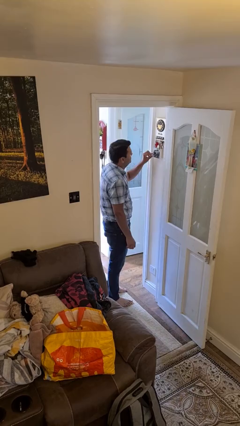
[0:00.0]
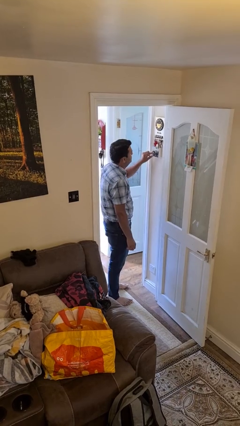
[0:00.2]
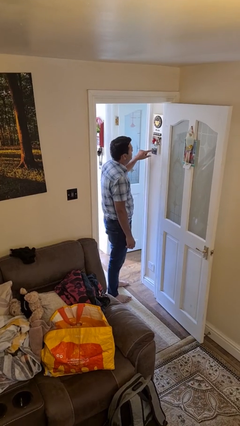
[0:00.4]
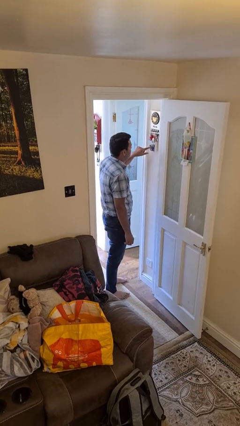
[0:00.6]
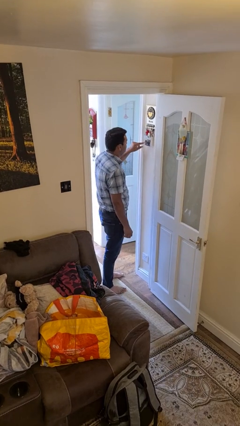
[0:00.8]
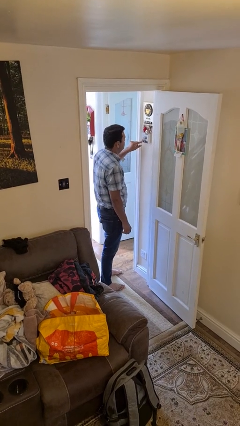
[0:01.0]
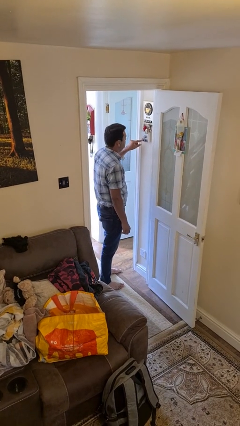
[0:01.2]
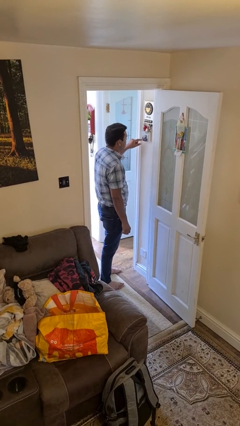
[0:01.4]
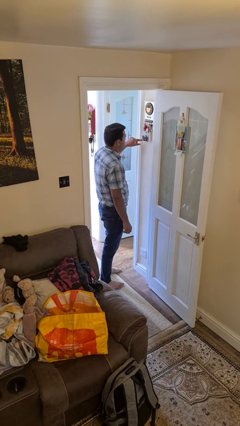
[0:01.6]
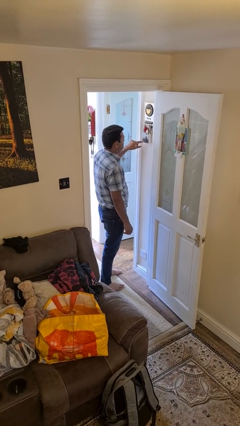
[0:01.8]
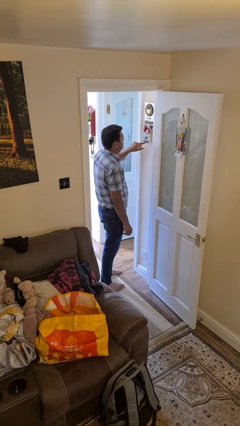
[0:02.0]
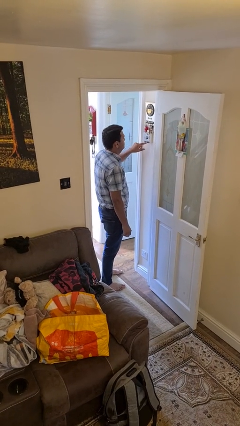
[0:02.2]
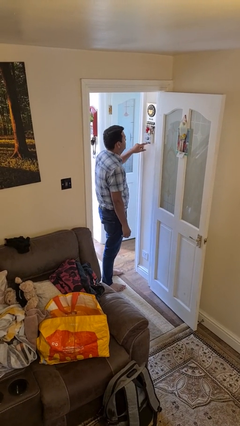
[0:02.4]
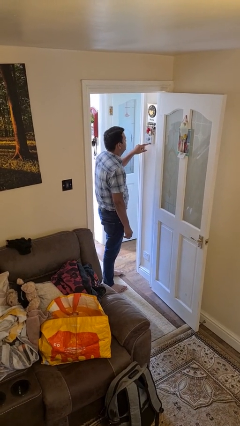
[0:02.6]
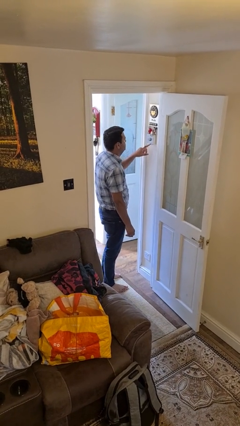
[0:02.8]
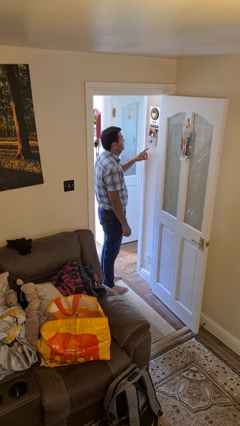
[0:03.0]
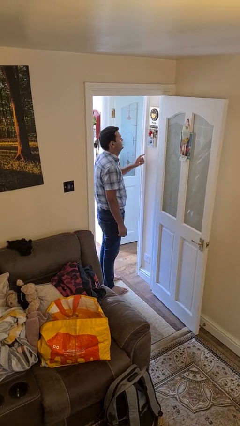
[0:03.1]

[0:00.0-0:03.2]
person adjusts thermostat

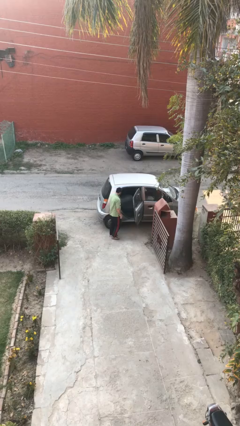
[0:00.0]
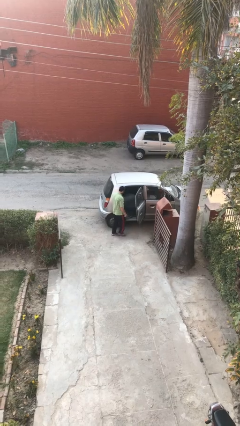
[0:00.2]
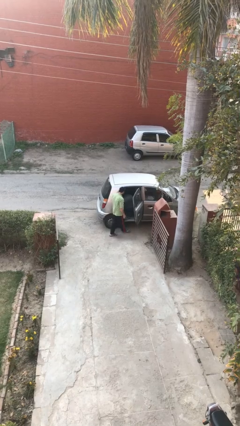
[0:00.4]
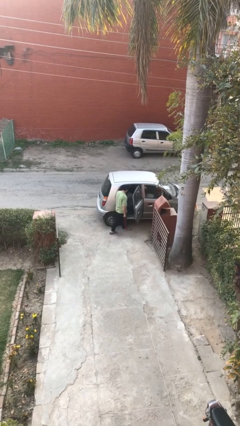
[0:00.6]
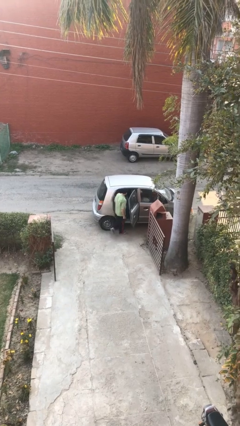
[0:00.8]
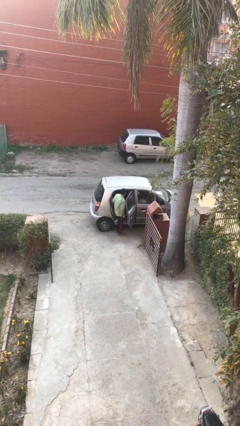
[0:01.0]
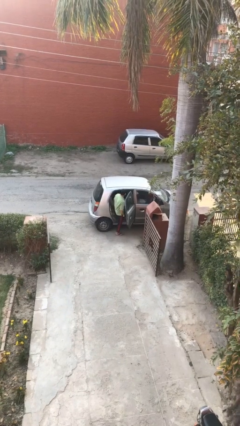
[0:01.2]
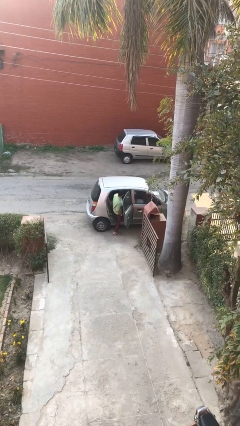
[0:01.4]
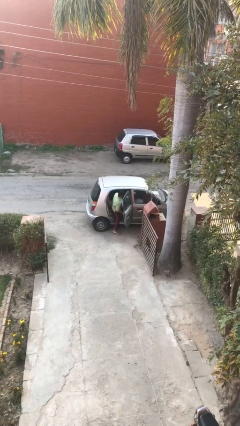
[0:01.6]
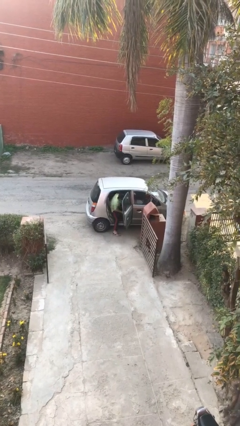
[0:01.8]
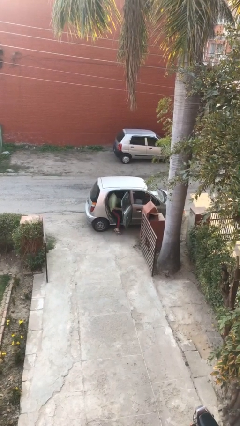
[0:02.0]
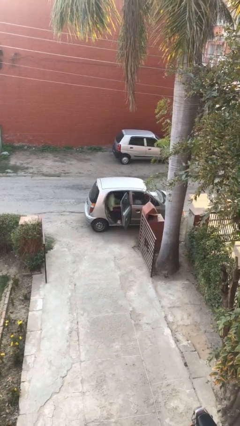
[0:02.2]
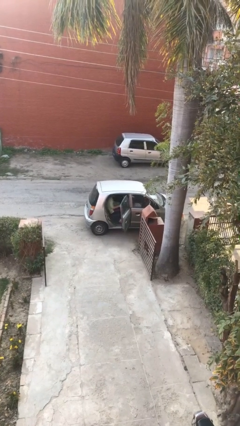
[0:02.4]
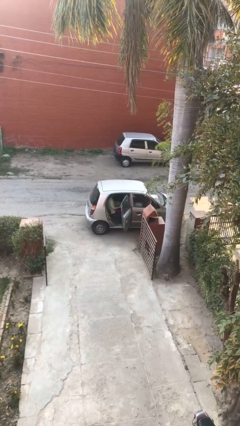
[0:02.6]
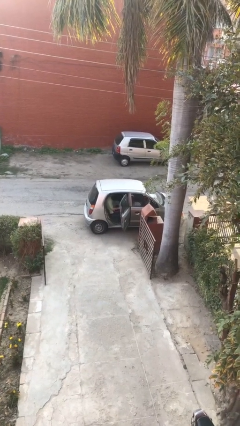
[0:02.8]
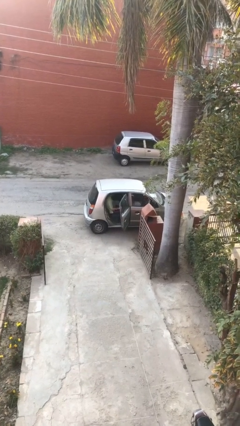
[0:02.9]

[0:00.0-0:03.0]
person enters car

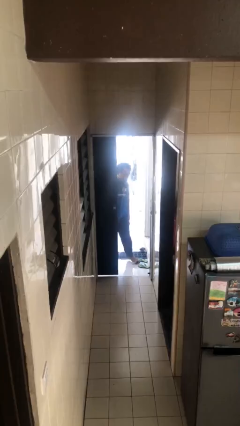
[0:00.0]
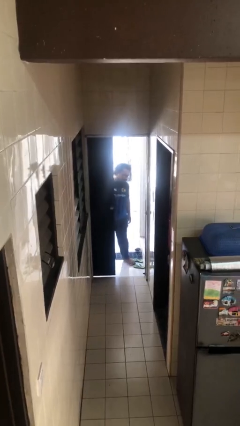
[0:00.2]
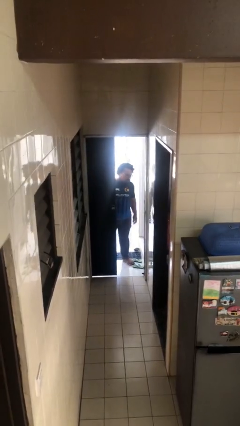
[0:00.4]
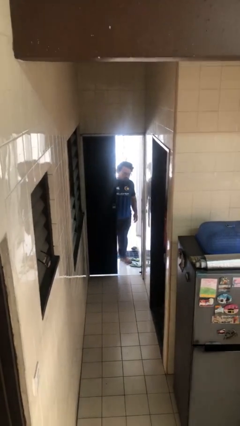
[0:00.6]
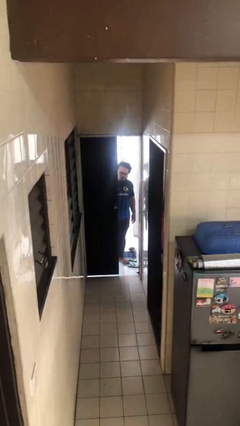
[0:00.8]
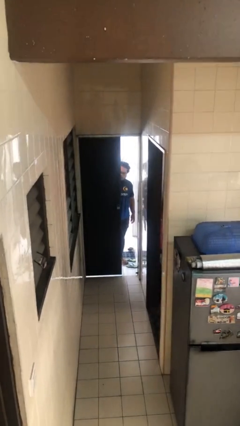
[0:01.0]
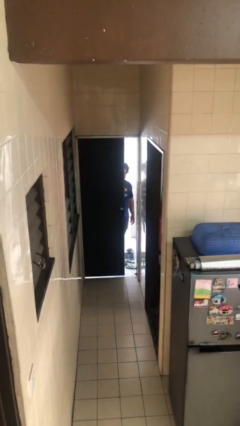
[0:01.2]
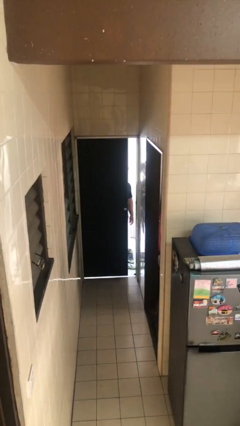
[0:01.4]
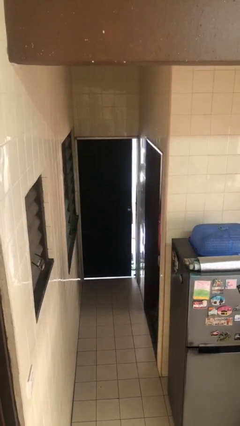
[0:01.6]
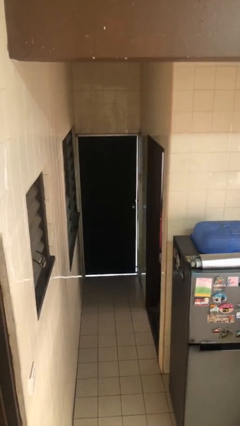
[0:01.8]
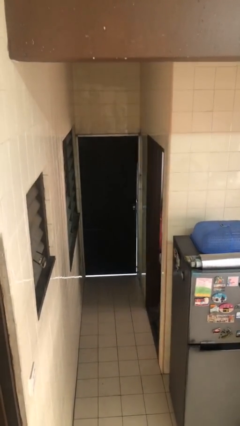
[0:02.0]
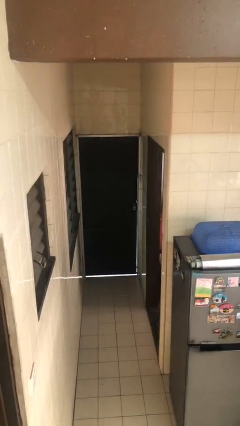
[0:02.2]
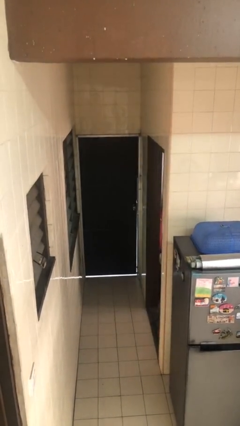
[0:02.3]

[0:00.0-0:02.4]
person closes facility door

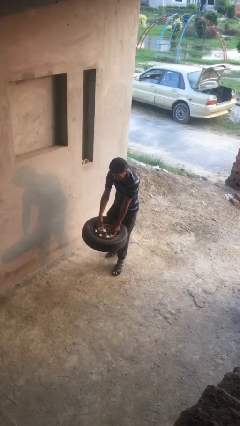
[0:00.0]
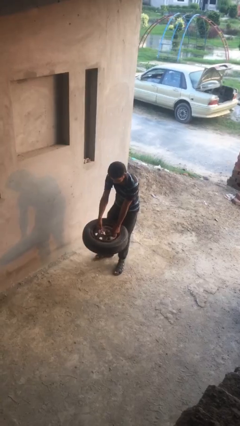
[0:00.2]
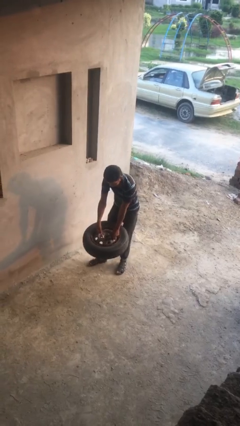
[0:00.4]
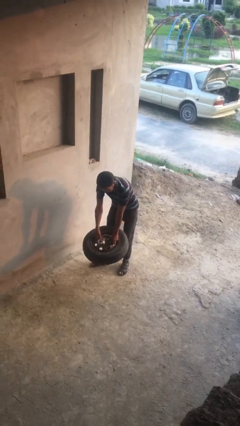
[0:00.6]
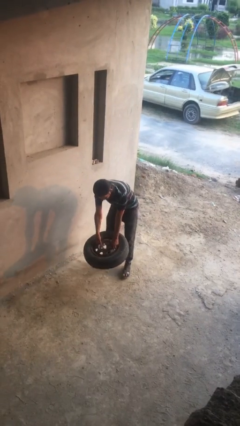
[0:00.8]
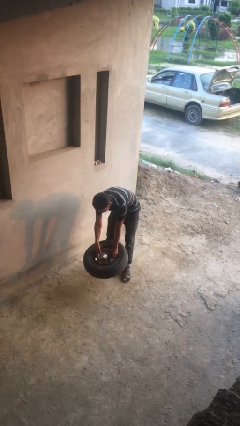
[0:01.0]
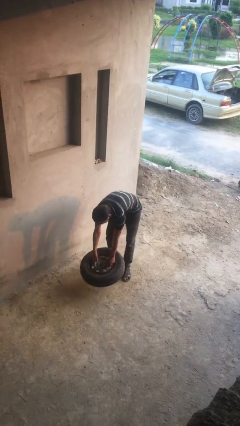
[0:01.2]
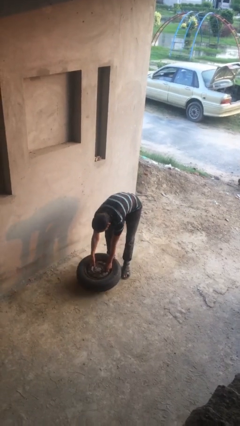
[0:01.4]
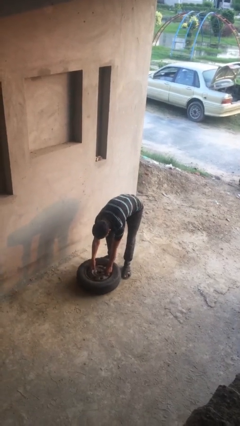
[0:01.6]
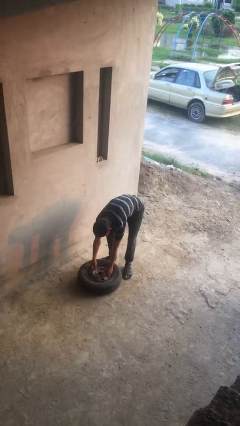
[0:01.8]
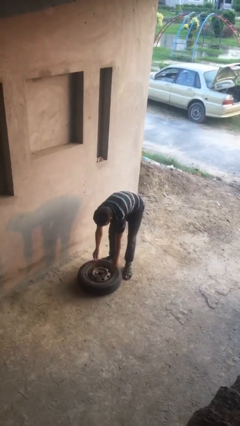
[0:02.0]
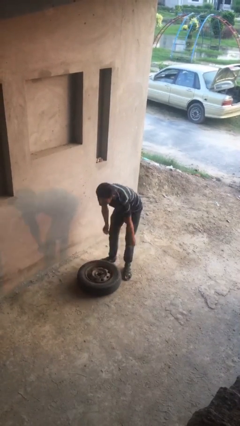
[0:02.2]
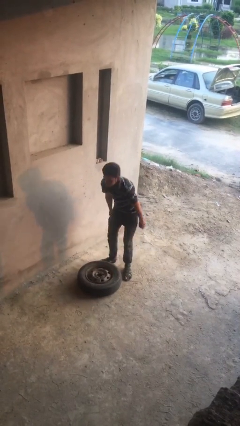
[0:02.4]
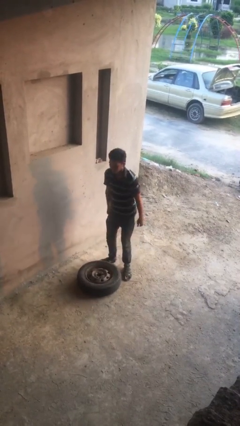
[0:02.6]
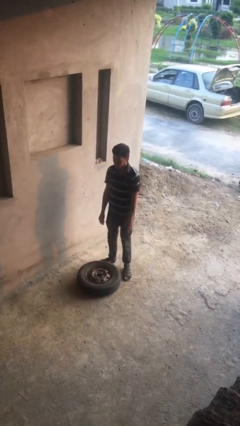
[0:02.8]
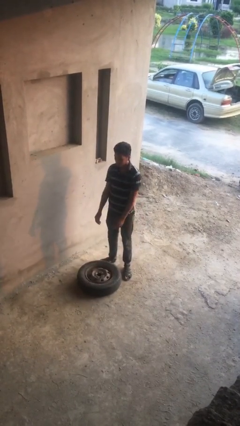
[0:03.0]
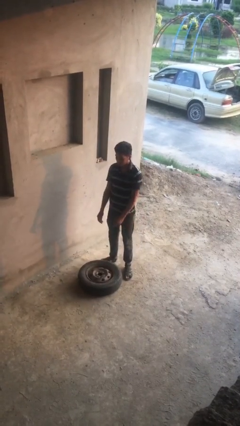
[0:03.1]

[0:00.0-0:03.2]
person puts down object on floor

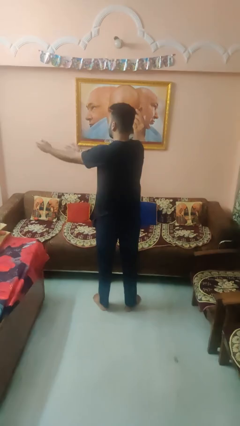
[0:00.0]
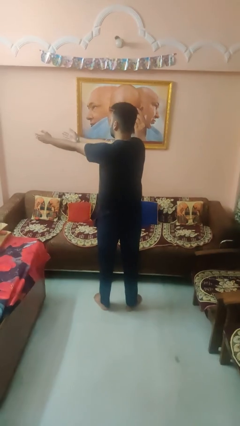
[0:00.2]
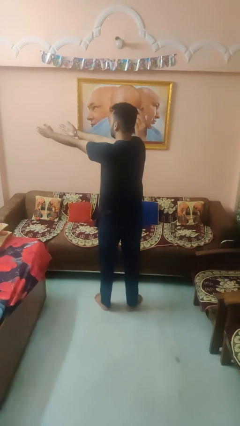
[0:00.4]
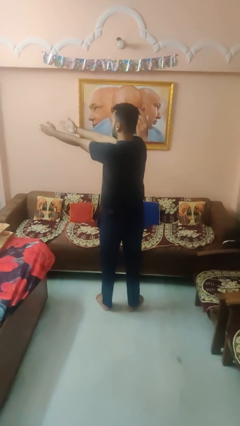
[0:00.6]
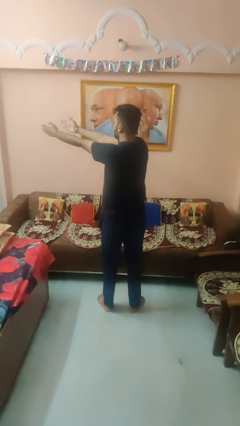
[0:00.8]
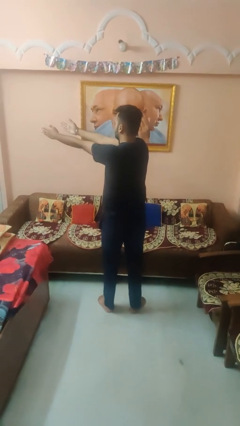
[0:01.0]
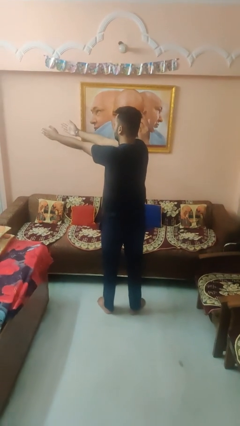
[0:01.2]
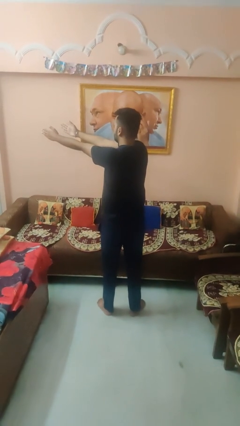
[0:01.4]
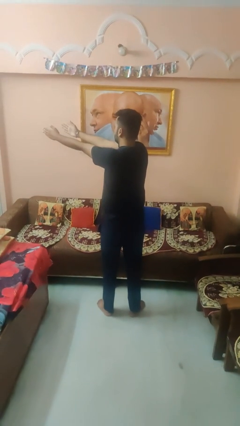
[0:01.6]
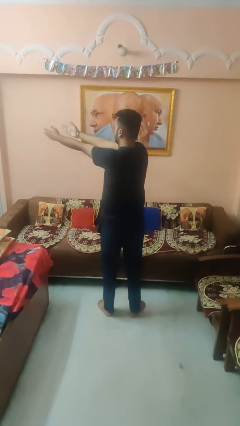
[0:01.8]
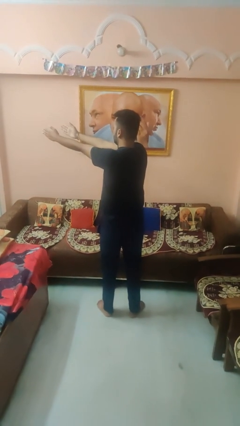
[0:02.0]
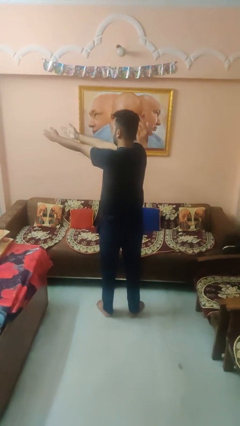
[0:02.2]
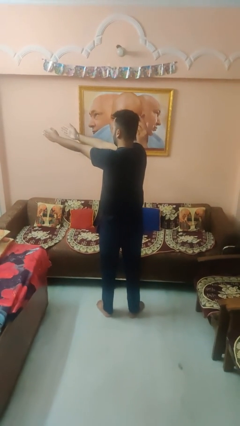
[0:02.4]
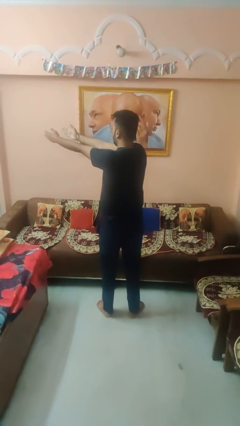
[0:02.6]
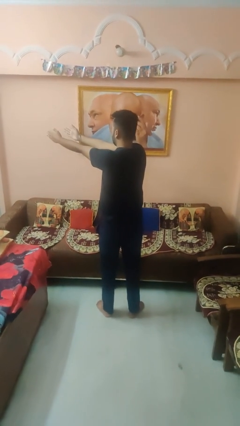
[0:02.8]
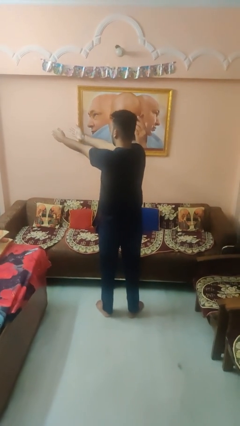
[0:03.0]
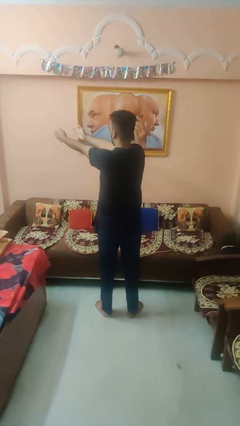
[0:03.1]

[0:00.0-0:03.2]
person gestures swipe left

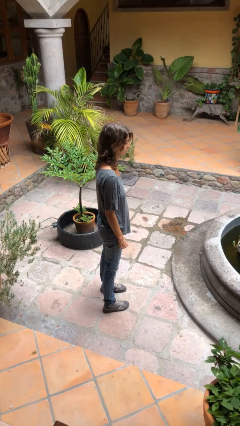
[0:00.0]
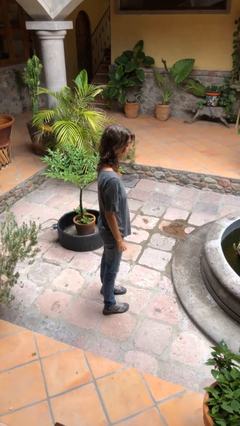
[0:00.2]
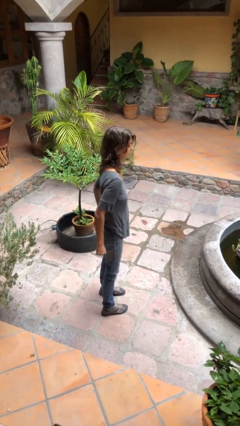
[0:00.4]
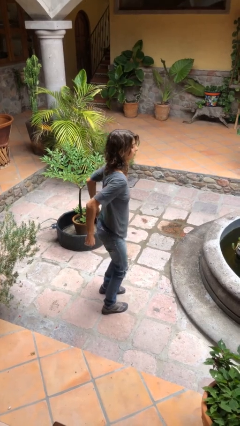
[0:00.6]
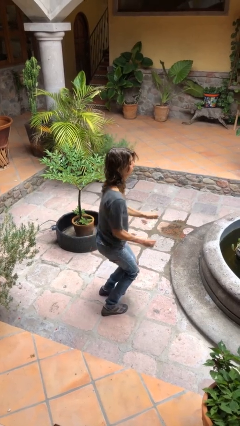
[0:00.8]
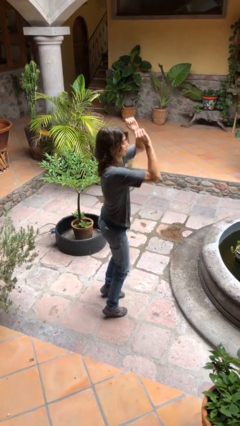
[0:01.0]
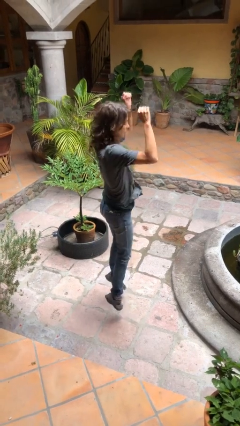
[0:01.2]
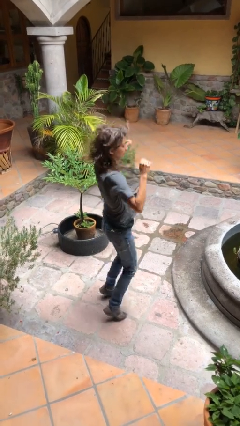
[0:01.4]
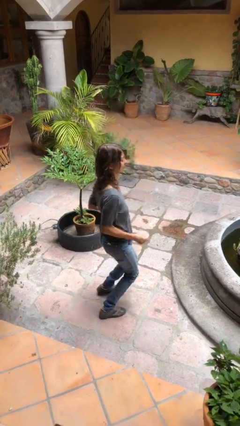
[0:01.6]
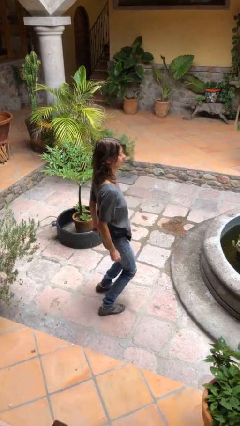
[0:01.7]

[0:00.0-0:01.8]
person jumps

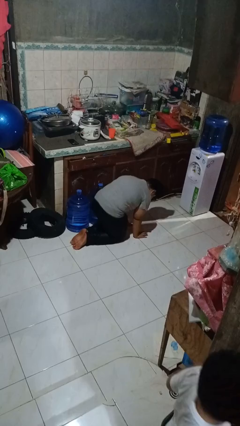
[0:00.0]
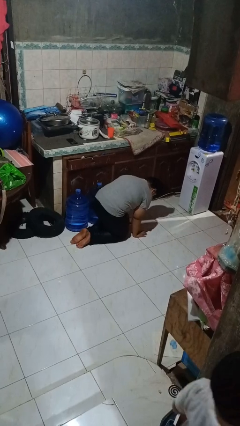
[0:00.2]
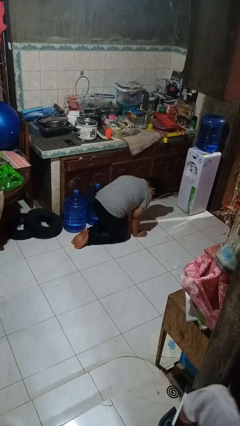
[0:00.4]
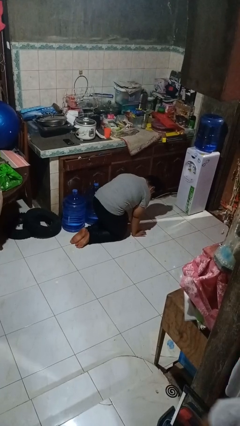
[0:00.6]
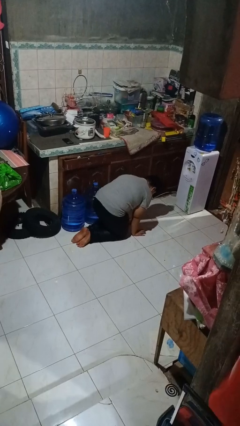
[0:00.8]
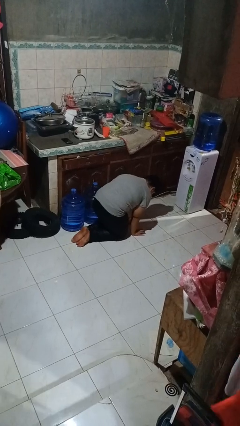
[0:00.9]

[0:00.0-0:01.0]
person crawls
